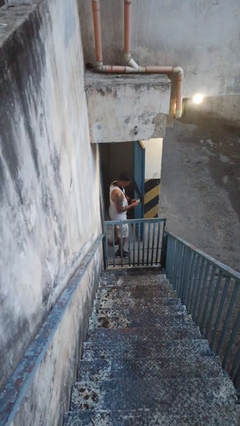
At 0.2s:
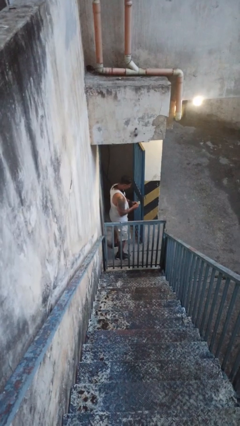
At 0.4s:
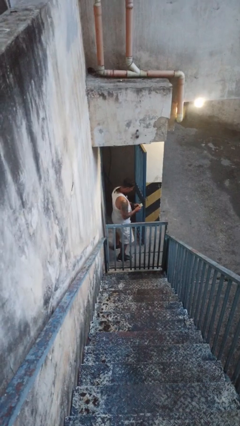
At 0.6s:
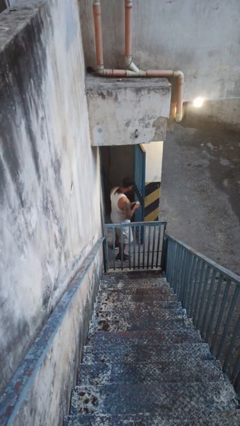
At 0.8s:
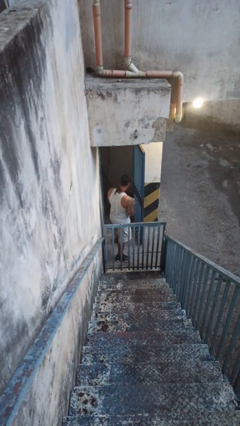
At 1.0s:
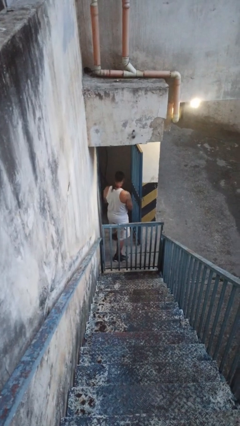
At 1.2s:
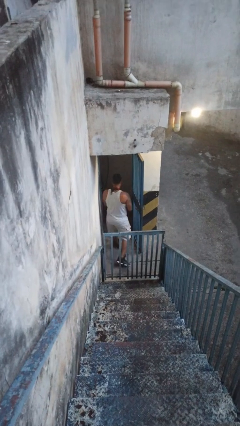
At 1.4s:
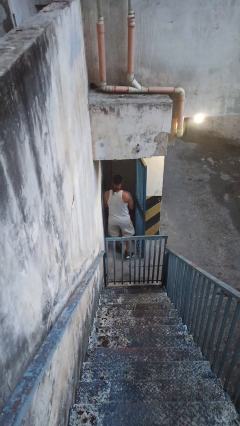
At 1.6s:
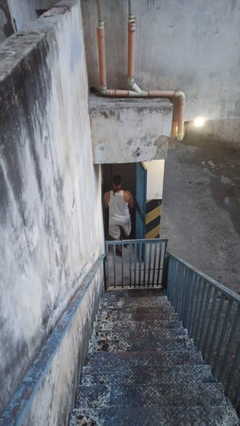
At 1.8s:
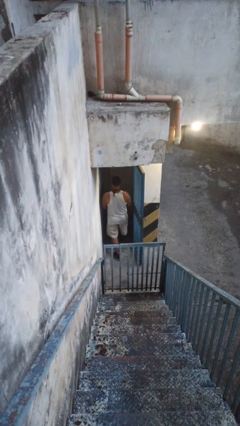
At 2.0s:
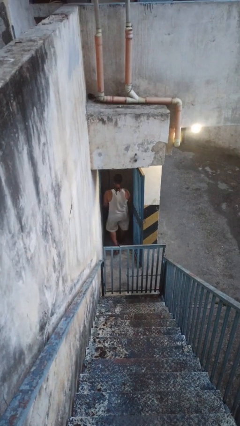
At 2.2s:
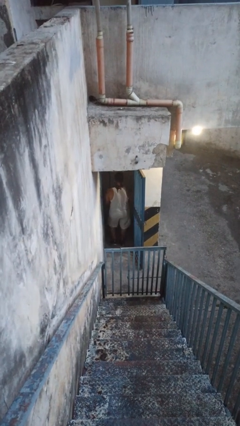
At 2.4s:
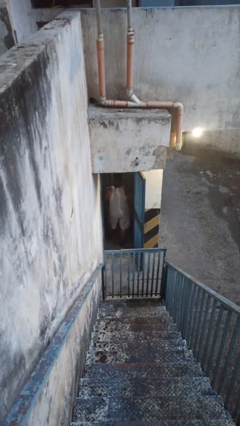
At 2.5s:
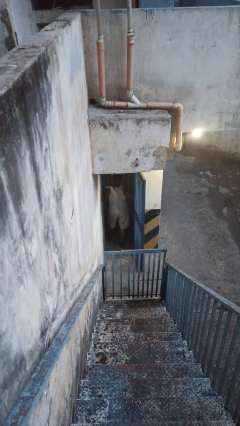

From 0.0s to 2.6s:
person exits scene through structure

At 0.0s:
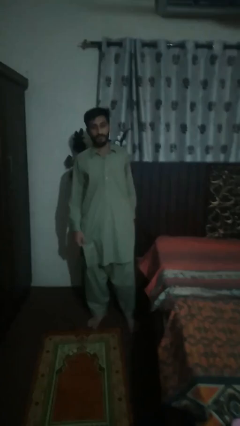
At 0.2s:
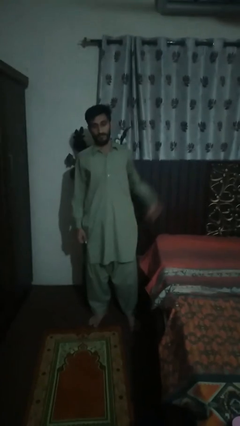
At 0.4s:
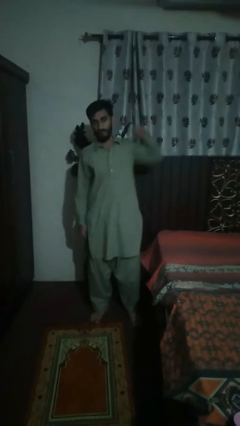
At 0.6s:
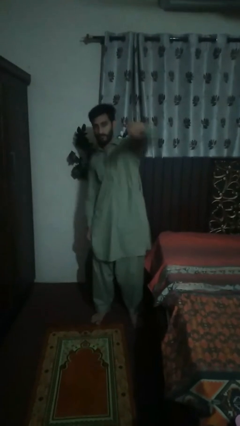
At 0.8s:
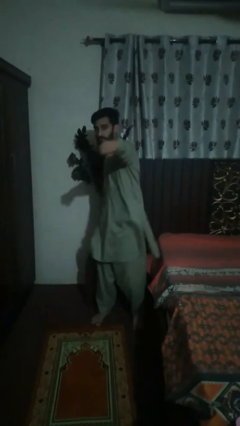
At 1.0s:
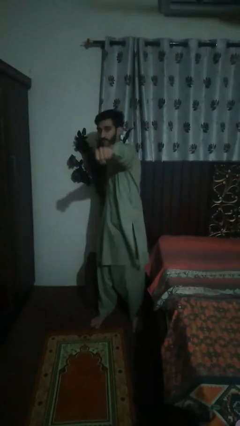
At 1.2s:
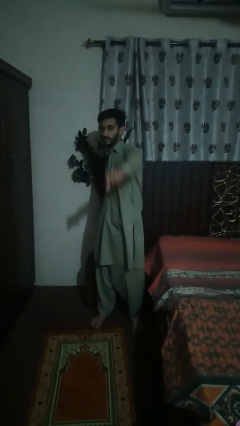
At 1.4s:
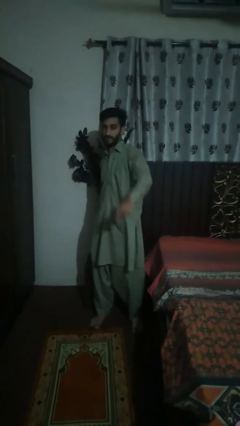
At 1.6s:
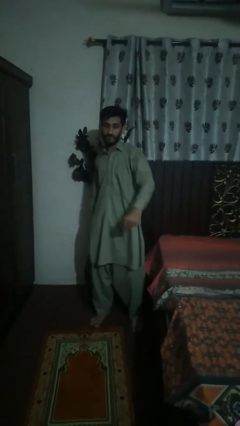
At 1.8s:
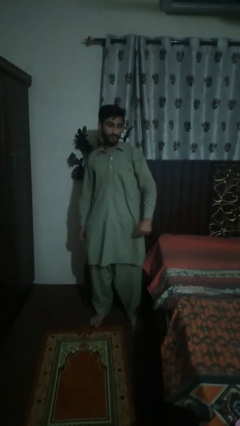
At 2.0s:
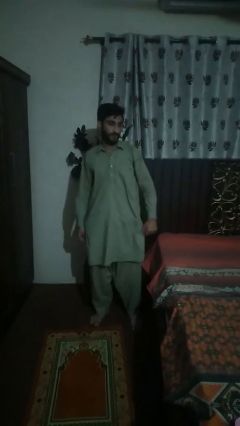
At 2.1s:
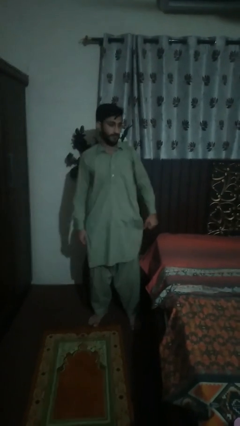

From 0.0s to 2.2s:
person punches

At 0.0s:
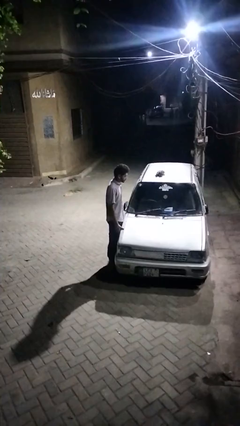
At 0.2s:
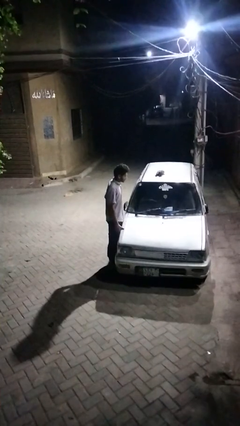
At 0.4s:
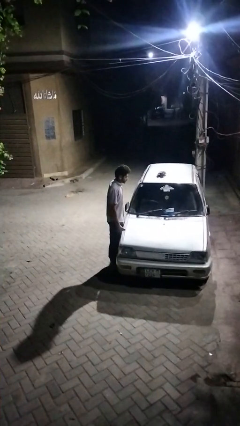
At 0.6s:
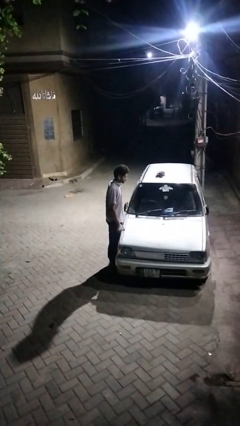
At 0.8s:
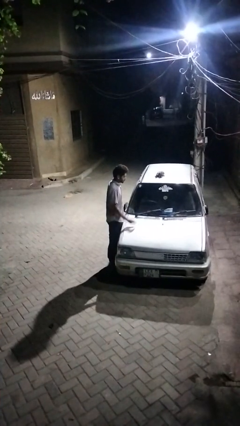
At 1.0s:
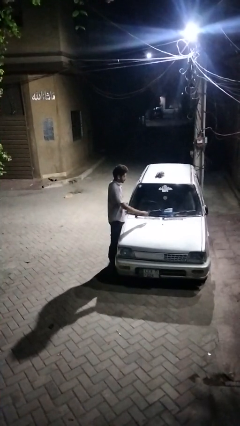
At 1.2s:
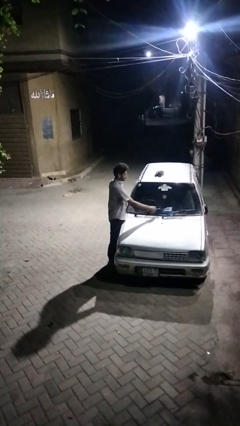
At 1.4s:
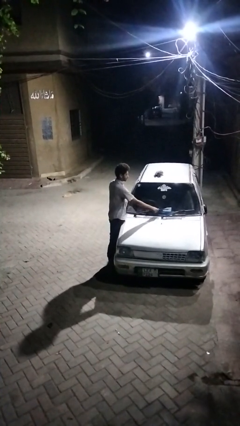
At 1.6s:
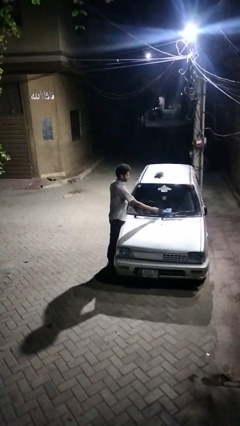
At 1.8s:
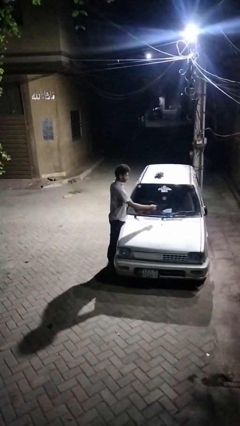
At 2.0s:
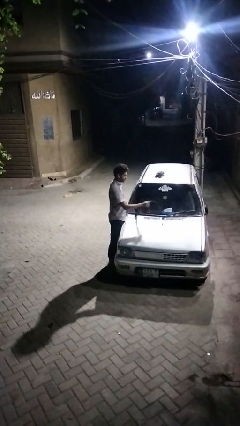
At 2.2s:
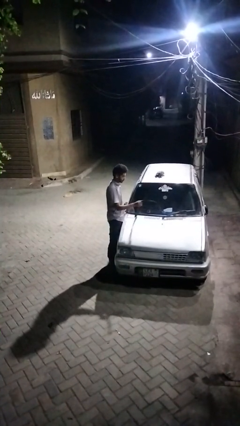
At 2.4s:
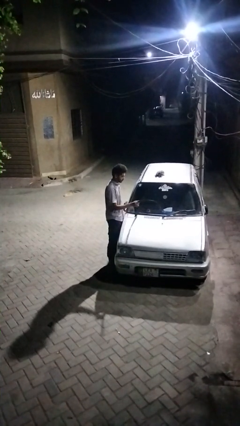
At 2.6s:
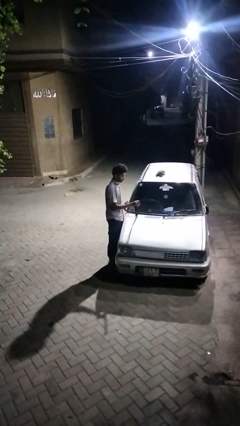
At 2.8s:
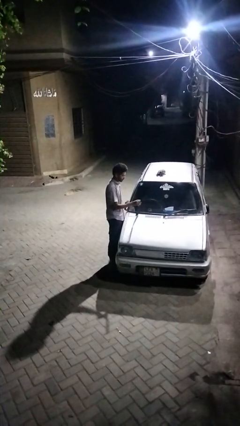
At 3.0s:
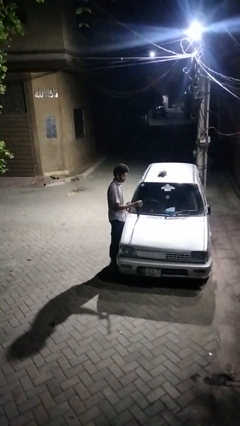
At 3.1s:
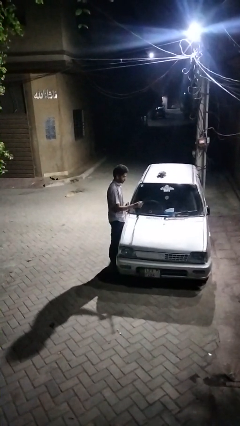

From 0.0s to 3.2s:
person flips up car wipers

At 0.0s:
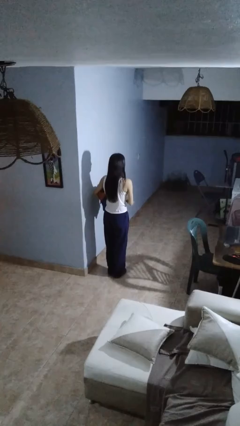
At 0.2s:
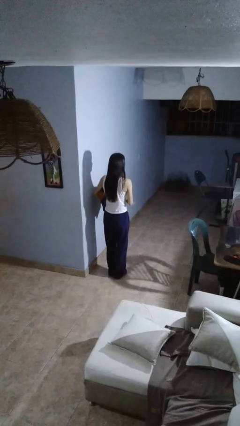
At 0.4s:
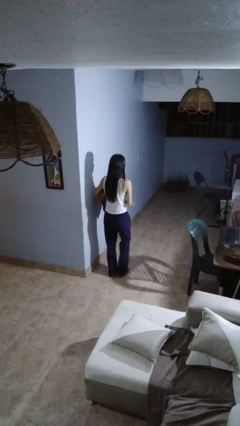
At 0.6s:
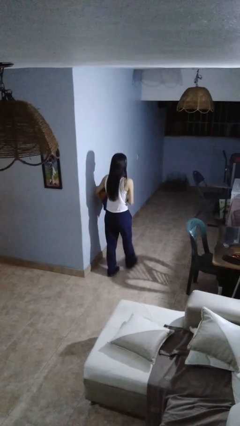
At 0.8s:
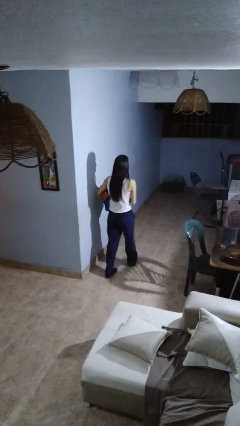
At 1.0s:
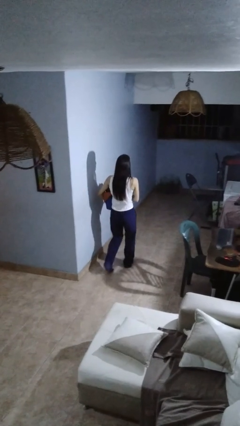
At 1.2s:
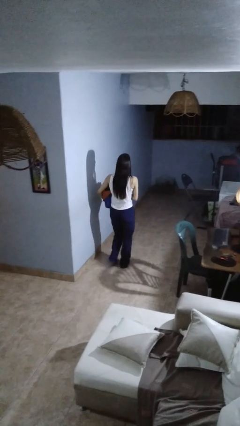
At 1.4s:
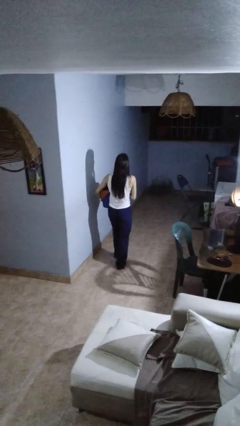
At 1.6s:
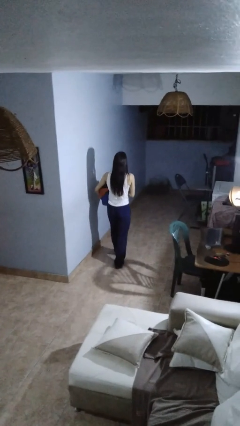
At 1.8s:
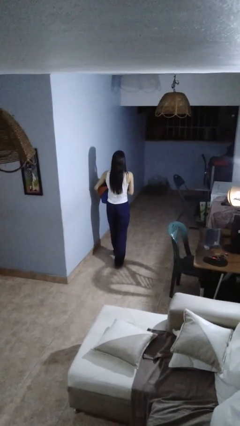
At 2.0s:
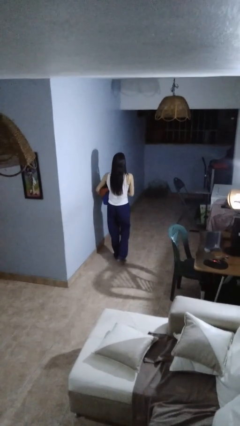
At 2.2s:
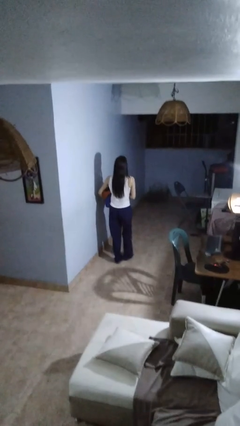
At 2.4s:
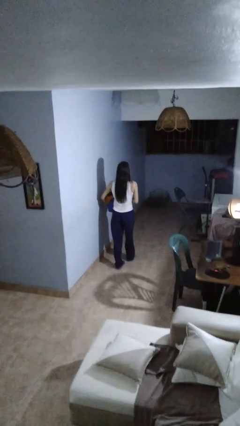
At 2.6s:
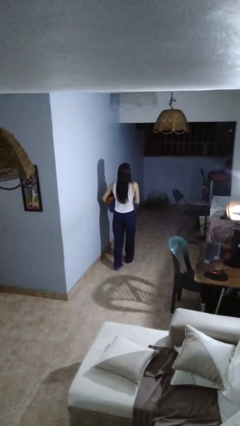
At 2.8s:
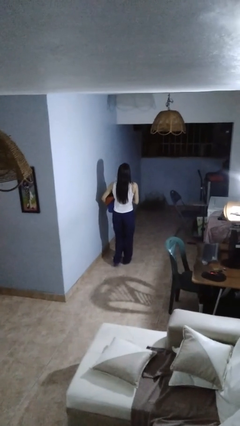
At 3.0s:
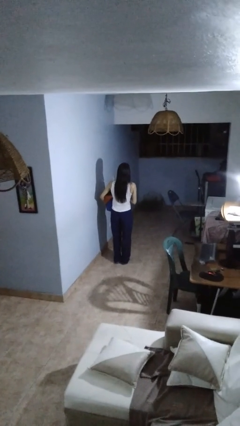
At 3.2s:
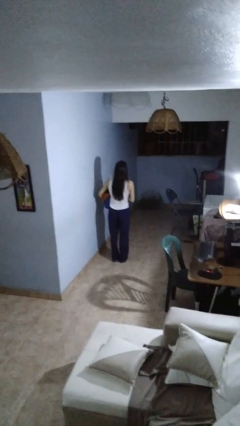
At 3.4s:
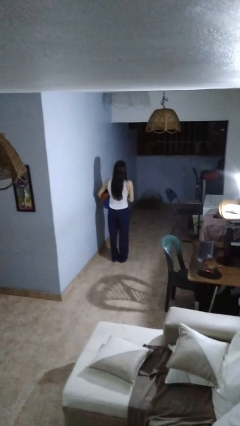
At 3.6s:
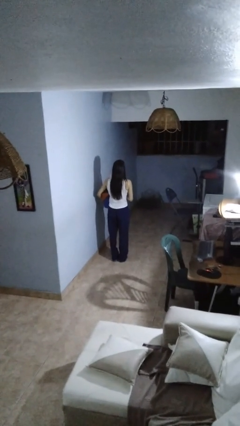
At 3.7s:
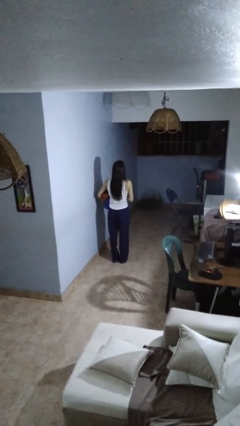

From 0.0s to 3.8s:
person carries laundry basket

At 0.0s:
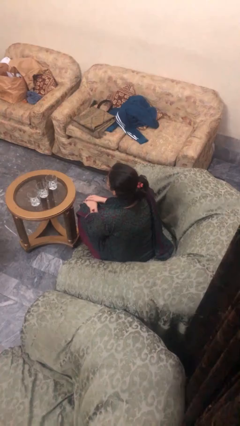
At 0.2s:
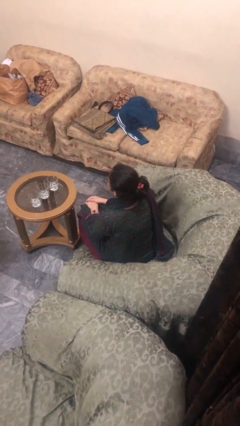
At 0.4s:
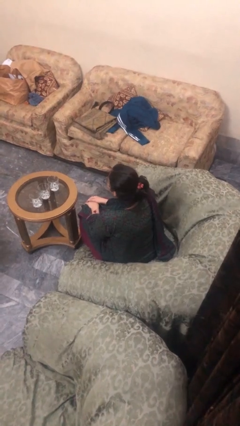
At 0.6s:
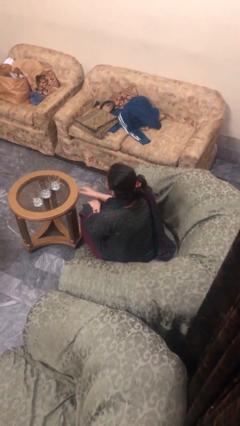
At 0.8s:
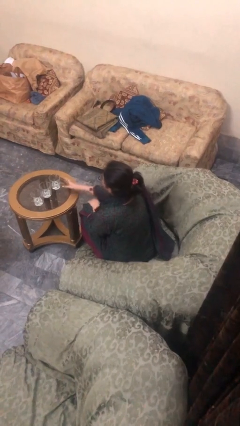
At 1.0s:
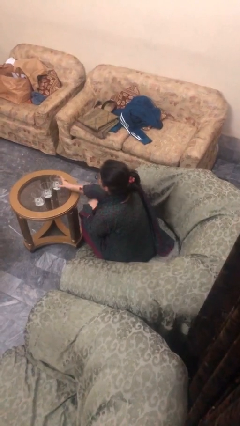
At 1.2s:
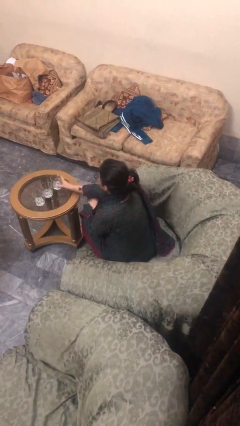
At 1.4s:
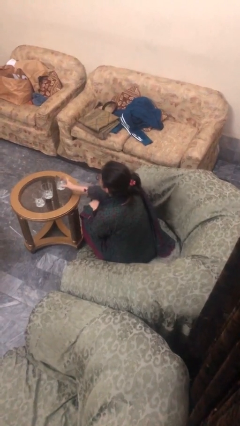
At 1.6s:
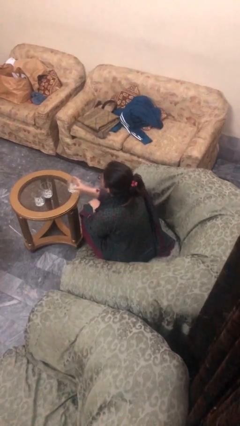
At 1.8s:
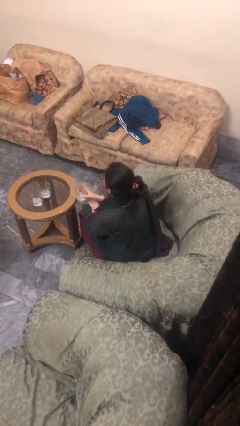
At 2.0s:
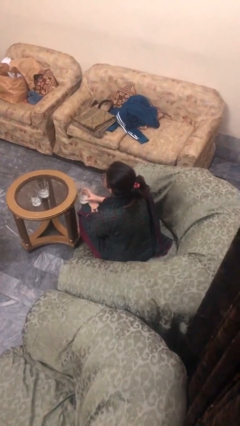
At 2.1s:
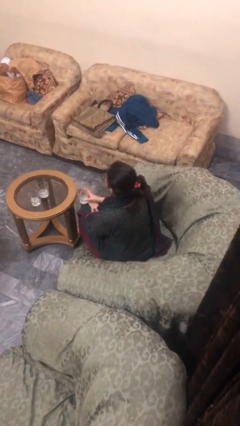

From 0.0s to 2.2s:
person picks up object from table

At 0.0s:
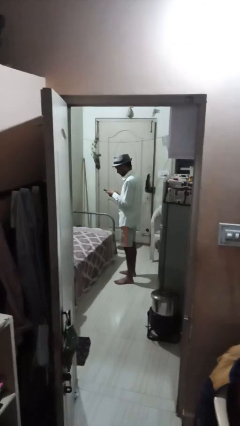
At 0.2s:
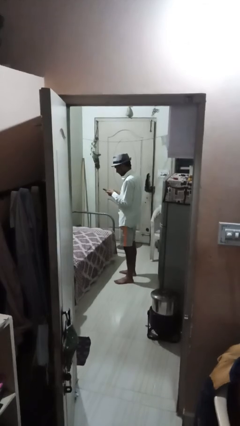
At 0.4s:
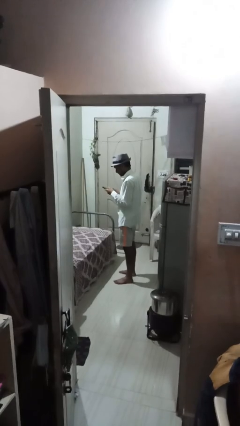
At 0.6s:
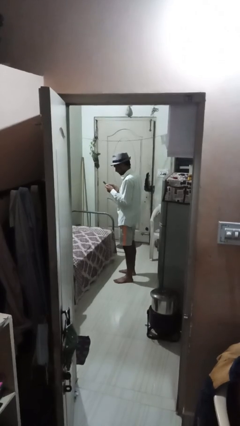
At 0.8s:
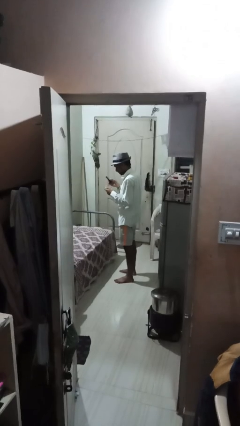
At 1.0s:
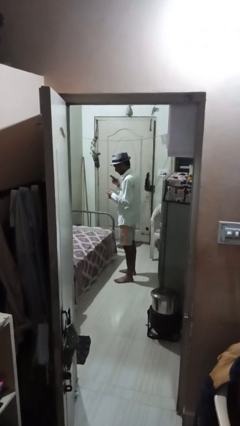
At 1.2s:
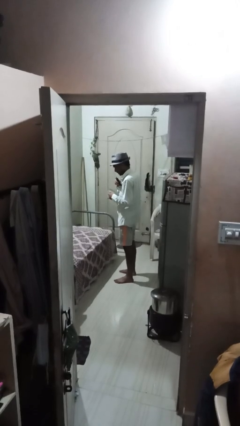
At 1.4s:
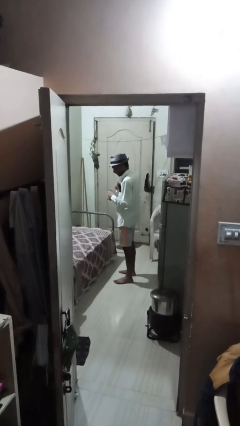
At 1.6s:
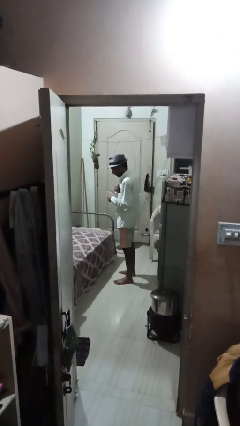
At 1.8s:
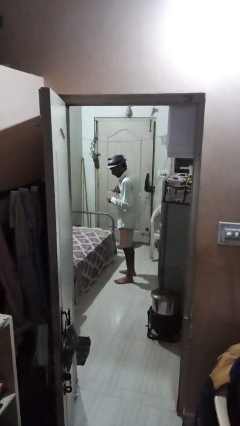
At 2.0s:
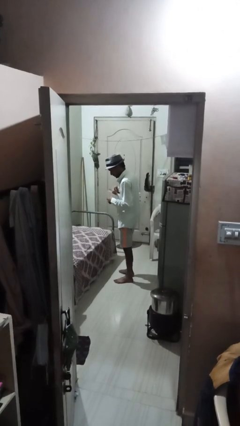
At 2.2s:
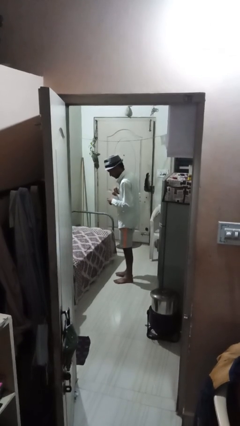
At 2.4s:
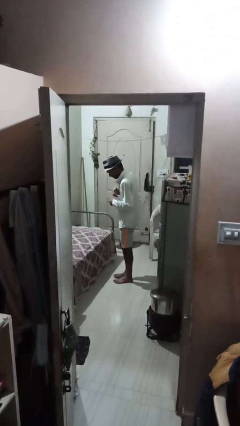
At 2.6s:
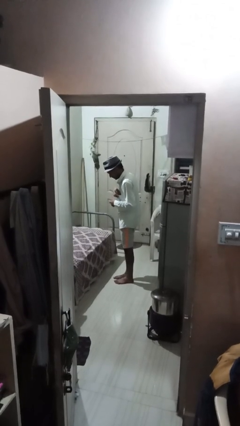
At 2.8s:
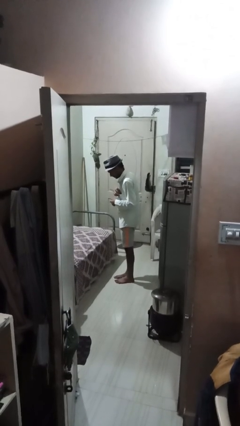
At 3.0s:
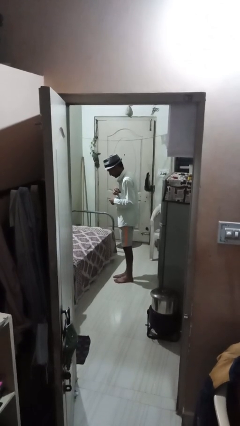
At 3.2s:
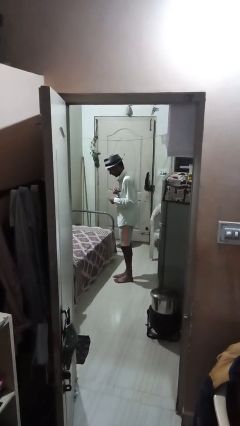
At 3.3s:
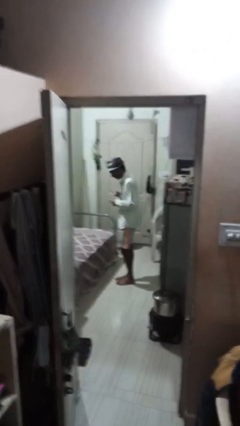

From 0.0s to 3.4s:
person puts phone into pocket
